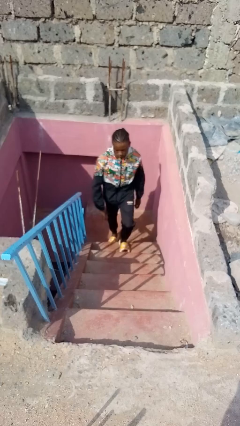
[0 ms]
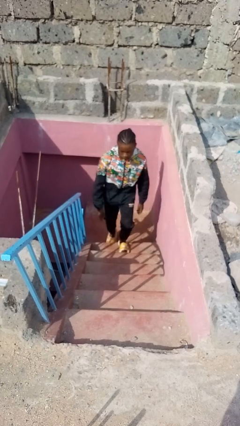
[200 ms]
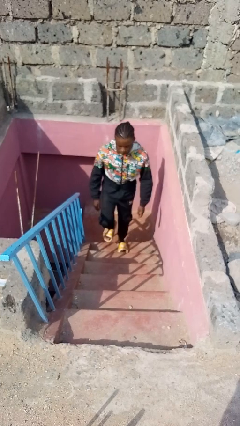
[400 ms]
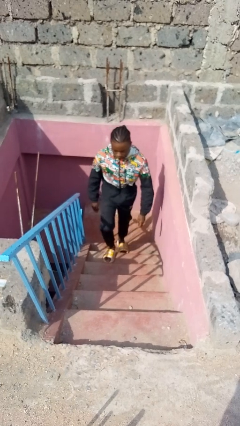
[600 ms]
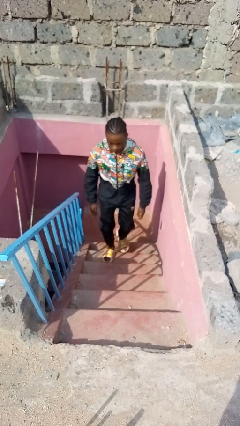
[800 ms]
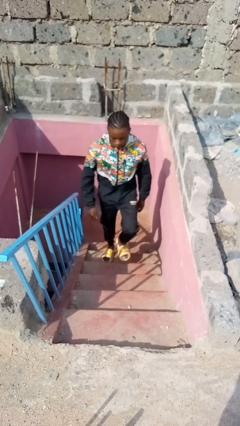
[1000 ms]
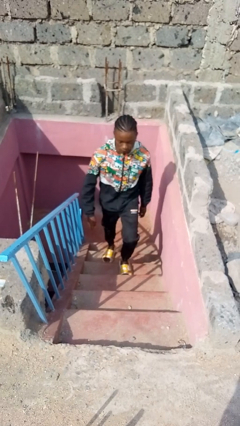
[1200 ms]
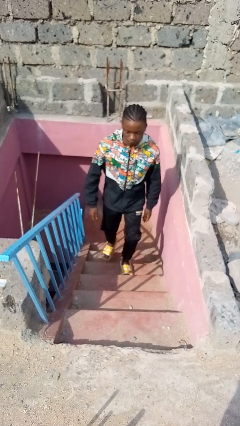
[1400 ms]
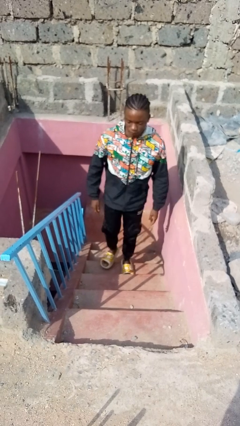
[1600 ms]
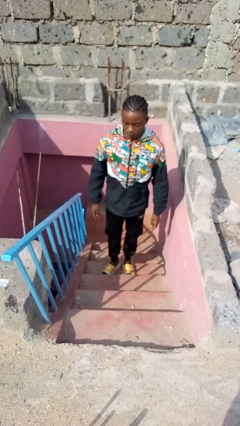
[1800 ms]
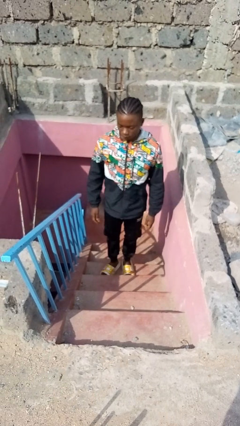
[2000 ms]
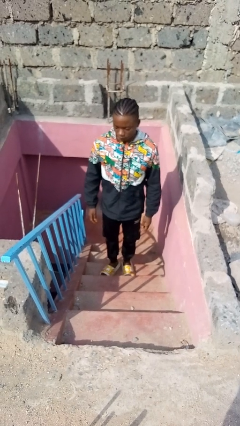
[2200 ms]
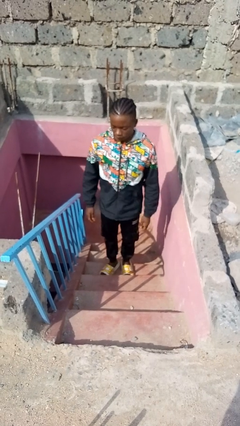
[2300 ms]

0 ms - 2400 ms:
person climbs up stairs

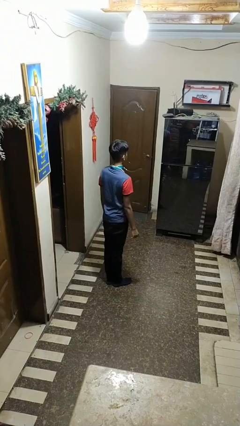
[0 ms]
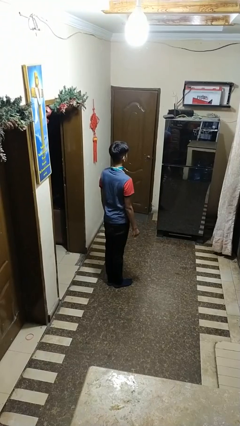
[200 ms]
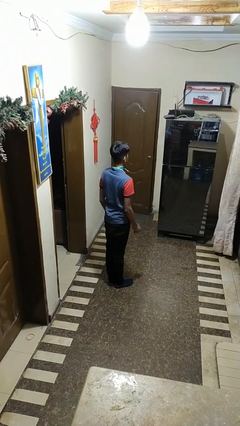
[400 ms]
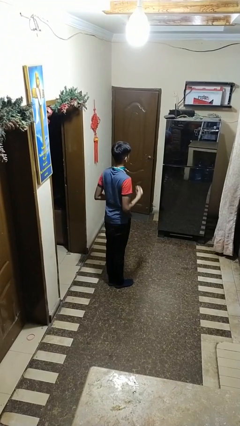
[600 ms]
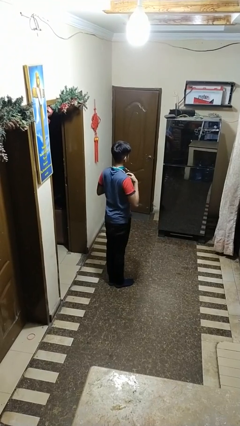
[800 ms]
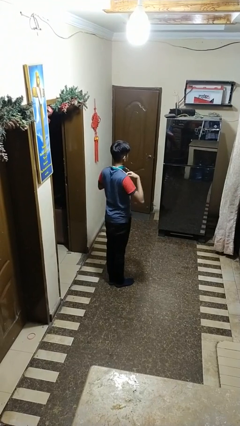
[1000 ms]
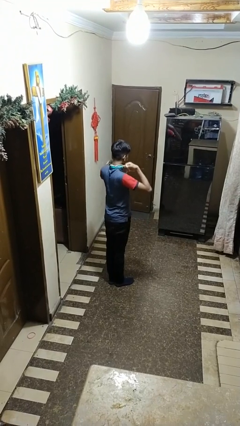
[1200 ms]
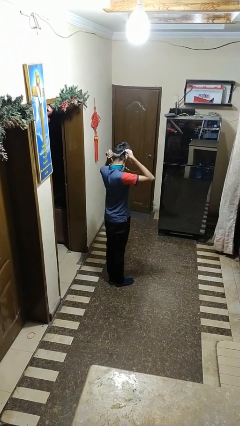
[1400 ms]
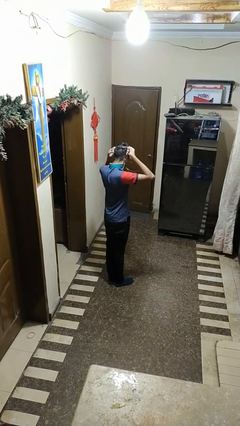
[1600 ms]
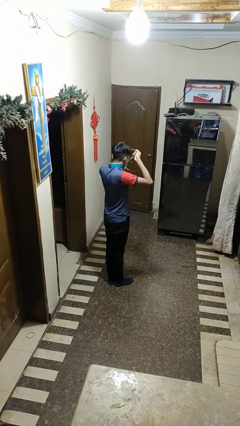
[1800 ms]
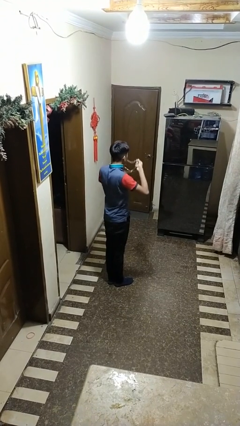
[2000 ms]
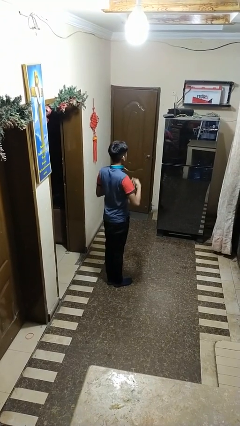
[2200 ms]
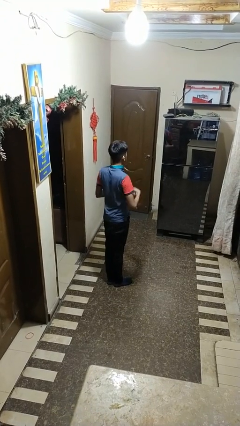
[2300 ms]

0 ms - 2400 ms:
person takes off necklace

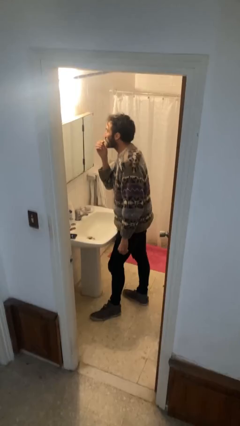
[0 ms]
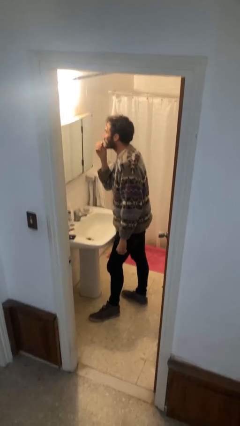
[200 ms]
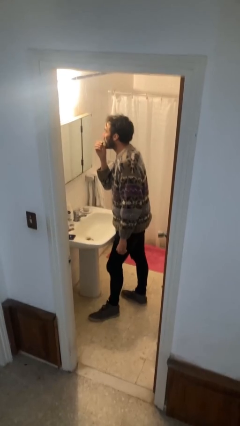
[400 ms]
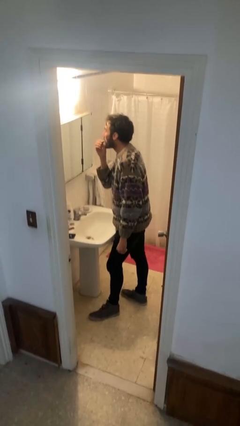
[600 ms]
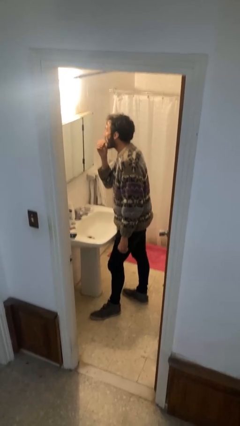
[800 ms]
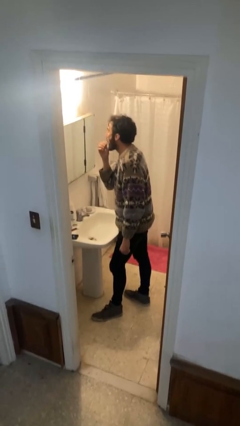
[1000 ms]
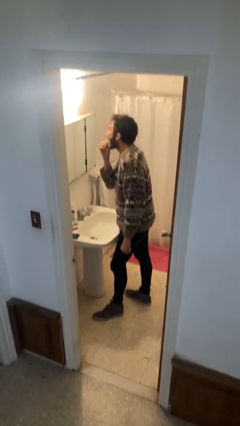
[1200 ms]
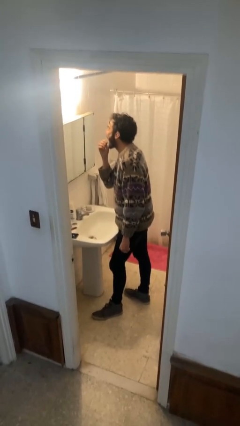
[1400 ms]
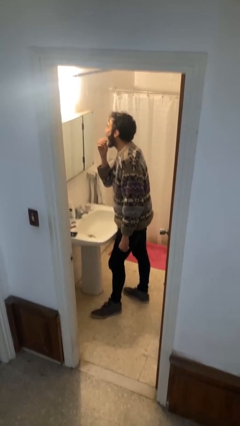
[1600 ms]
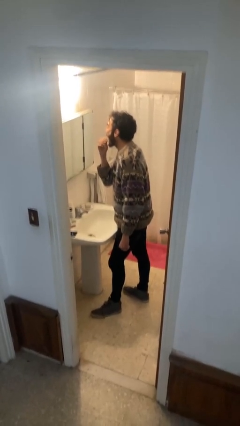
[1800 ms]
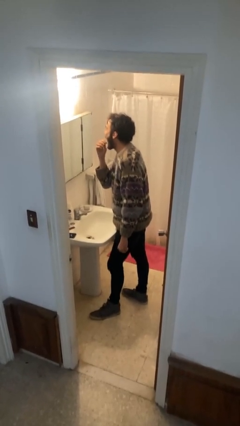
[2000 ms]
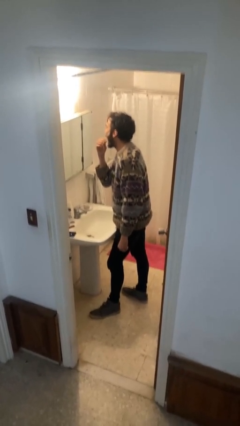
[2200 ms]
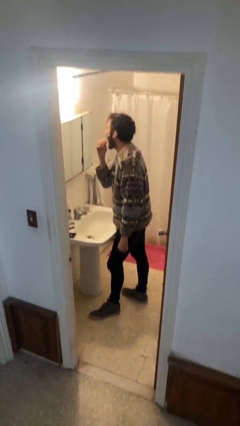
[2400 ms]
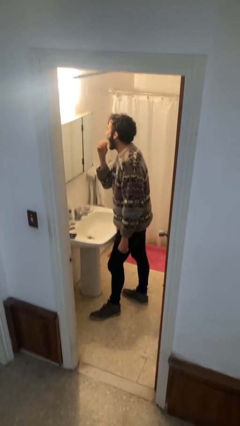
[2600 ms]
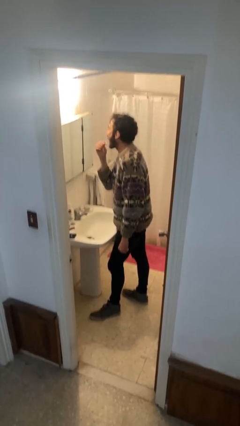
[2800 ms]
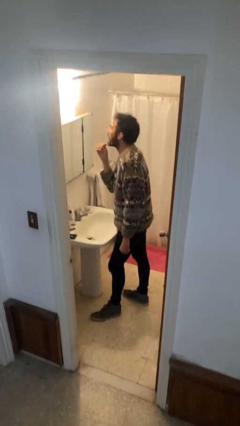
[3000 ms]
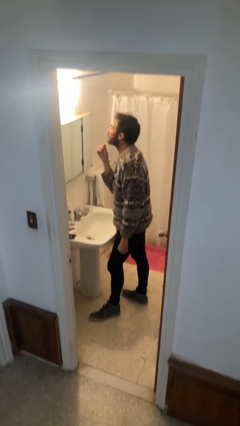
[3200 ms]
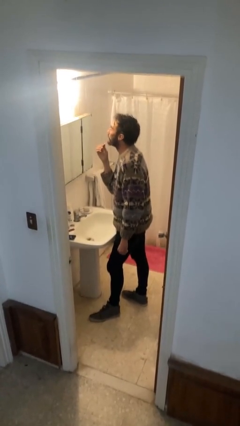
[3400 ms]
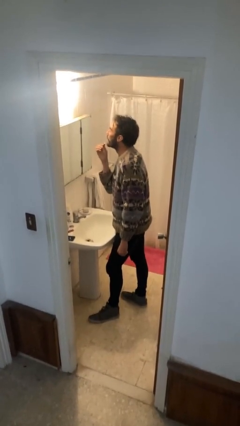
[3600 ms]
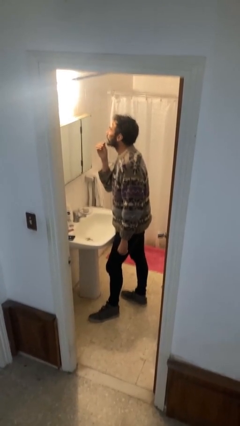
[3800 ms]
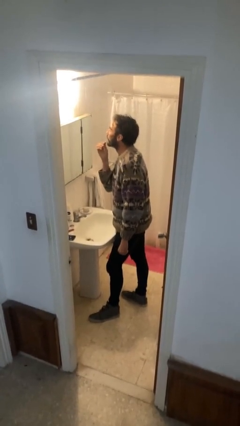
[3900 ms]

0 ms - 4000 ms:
person applies lip makeup

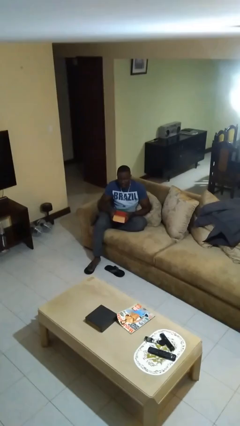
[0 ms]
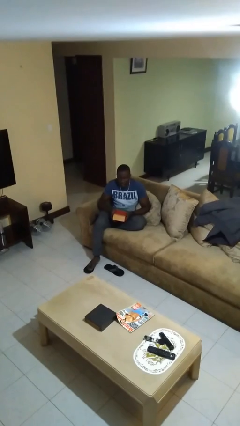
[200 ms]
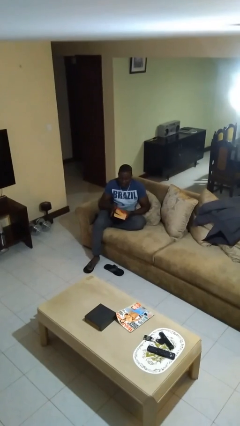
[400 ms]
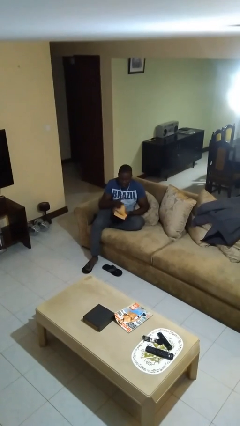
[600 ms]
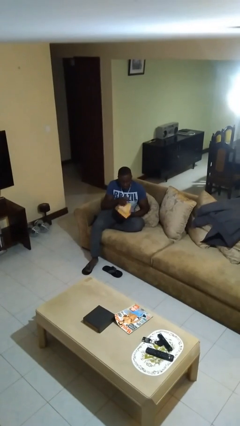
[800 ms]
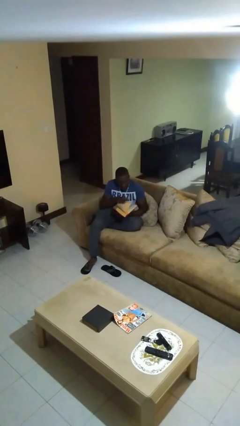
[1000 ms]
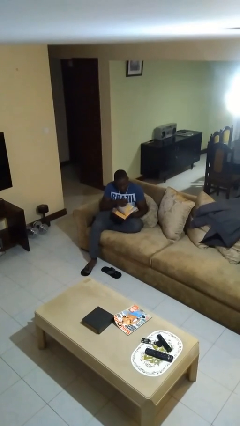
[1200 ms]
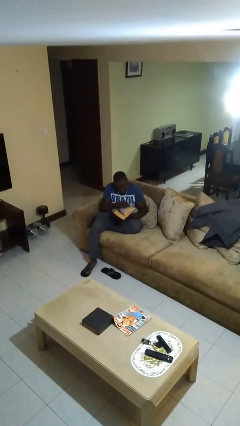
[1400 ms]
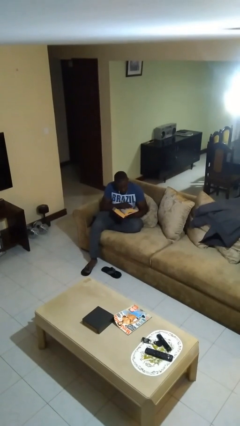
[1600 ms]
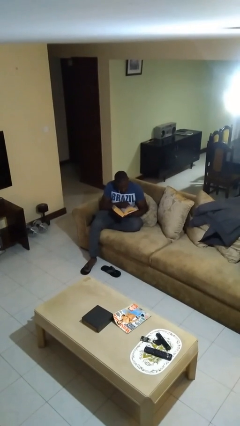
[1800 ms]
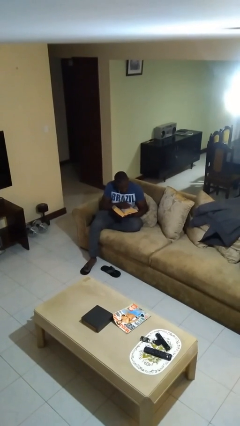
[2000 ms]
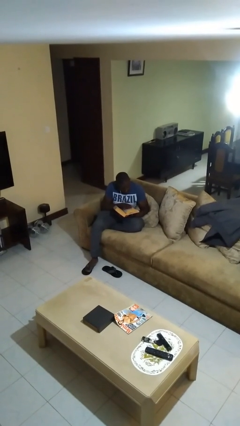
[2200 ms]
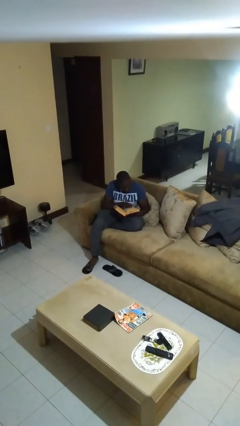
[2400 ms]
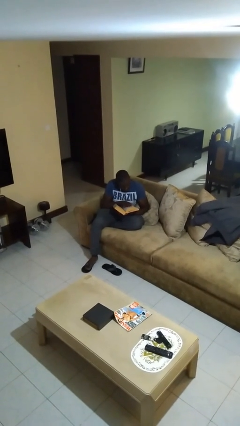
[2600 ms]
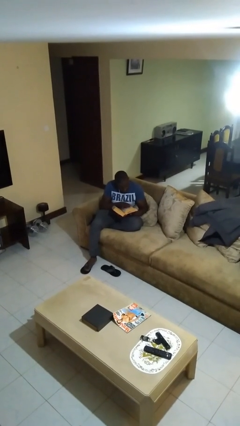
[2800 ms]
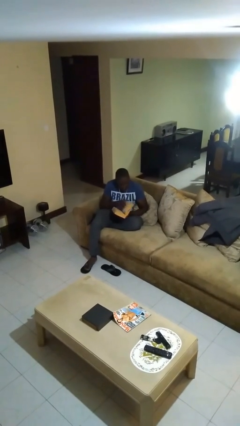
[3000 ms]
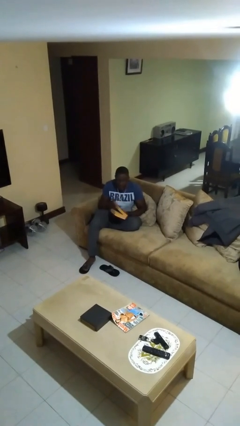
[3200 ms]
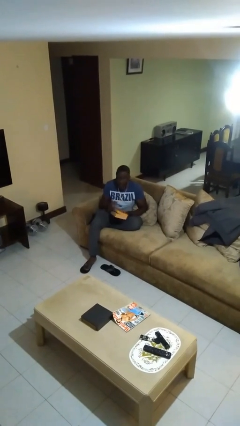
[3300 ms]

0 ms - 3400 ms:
person reads book

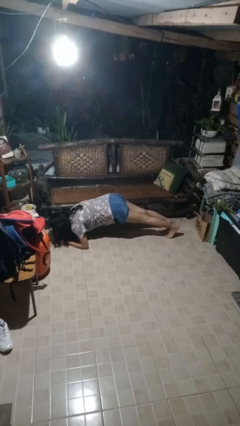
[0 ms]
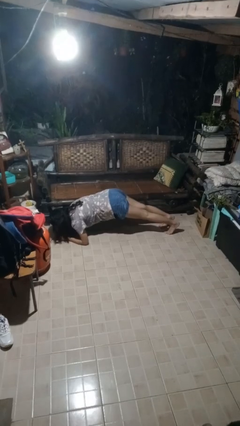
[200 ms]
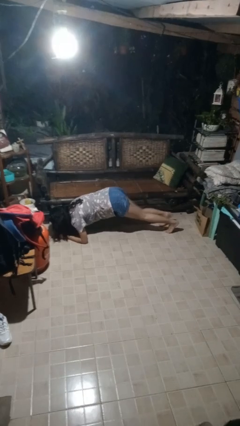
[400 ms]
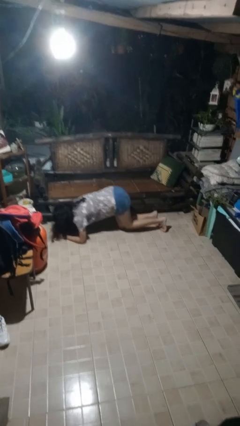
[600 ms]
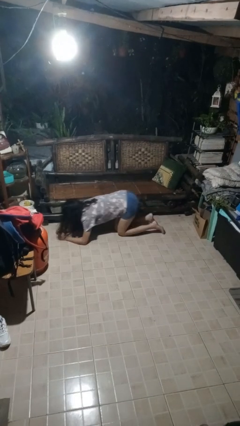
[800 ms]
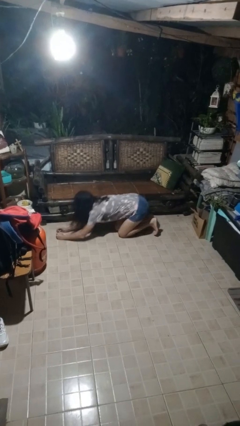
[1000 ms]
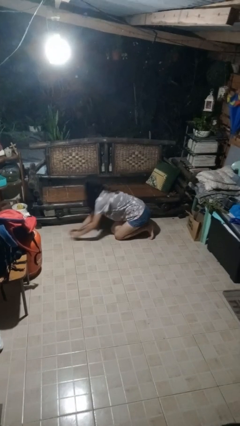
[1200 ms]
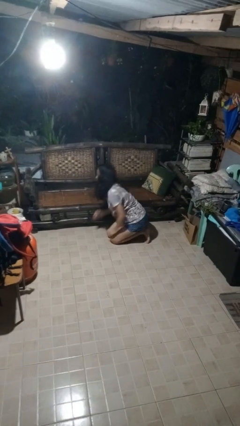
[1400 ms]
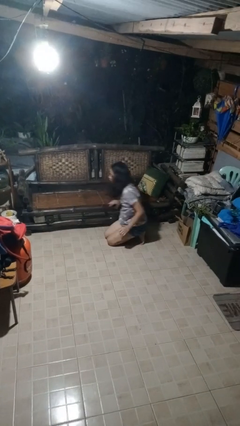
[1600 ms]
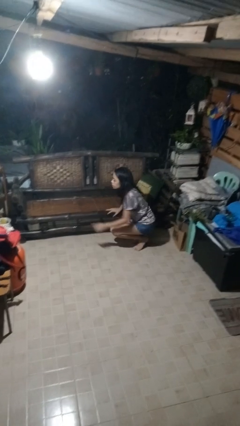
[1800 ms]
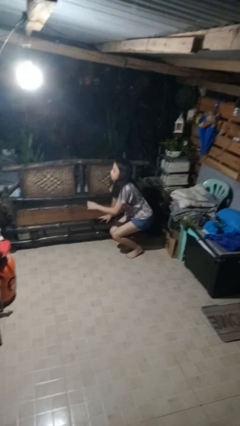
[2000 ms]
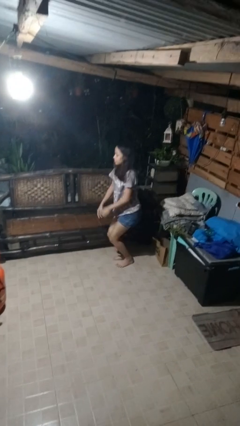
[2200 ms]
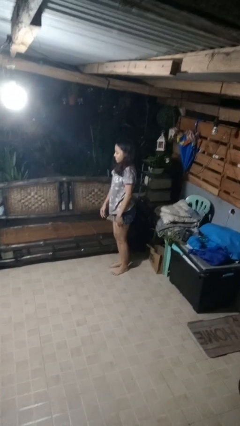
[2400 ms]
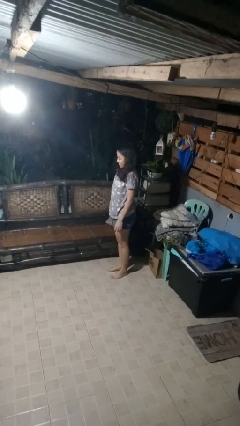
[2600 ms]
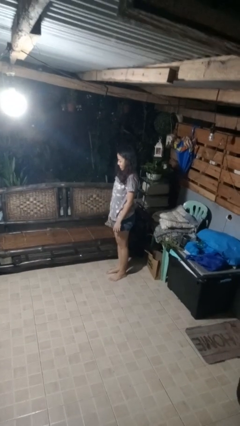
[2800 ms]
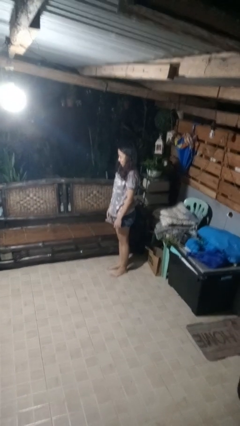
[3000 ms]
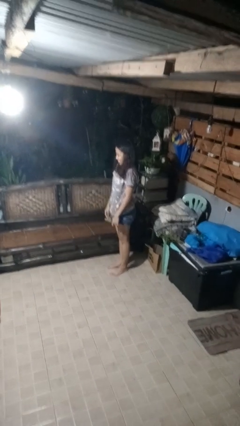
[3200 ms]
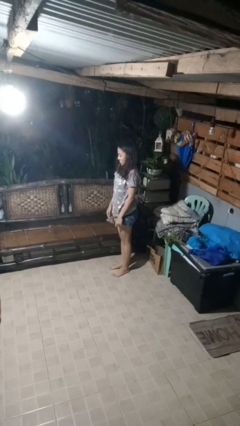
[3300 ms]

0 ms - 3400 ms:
person stands up from floor

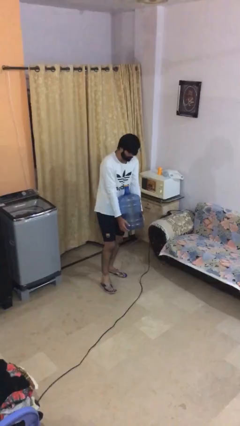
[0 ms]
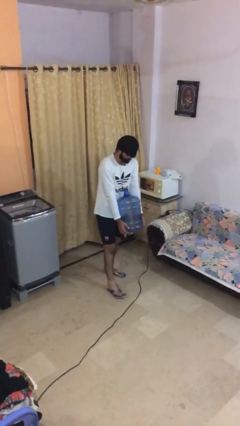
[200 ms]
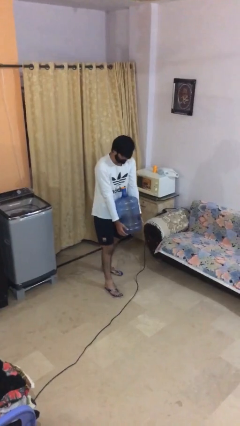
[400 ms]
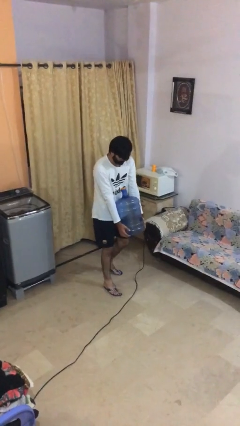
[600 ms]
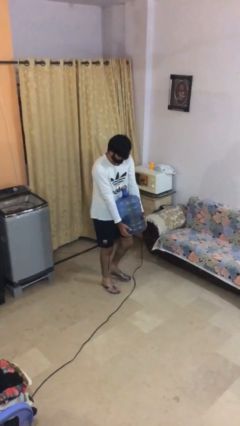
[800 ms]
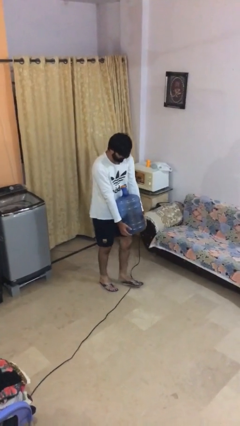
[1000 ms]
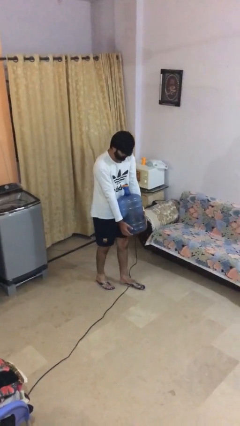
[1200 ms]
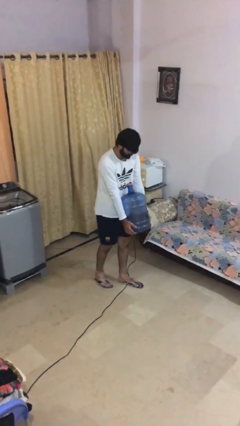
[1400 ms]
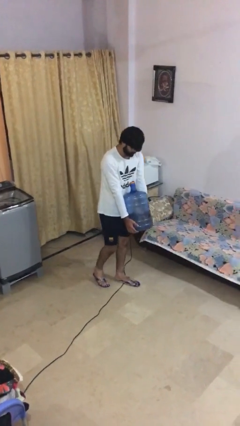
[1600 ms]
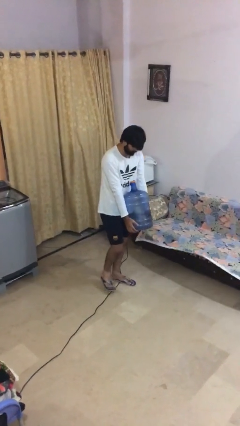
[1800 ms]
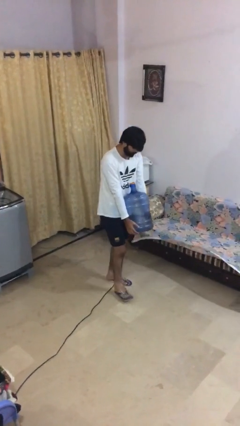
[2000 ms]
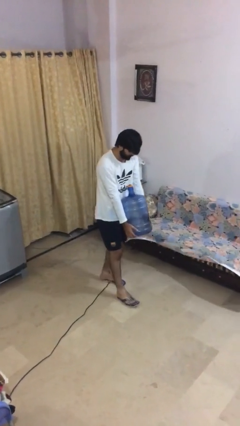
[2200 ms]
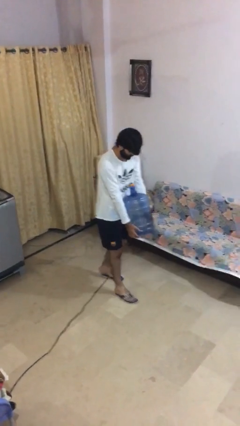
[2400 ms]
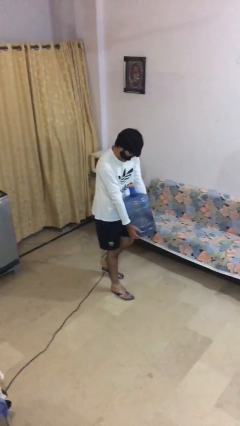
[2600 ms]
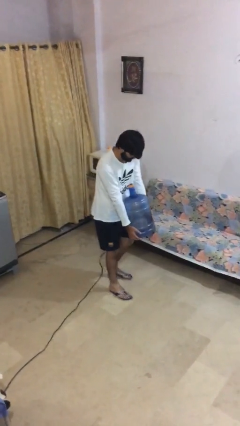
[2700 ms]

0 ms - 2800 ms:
person carries heavy object
